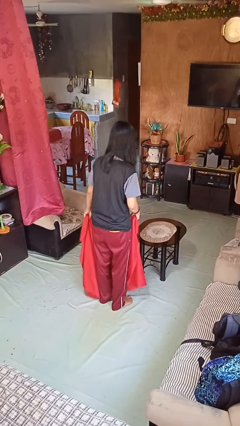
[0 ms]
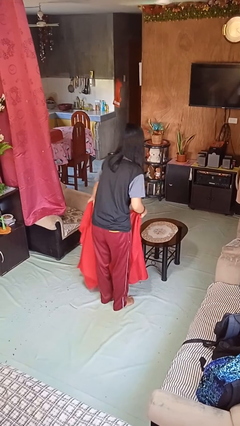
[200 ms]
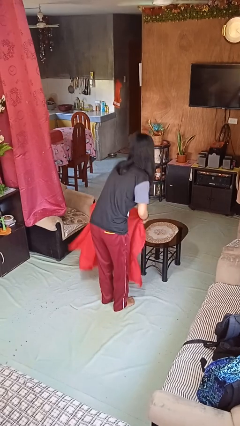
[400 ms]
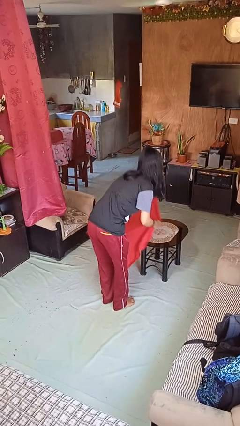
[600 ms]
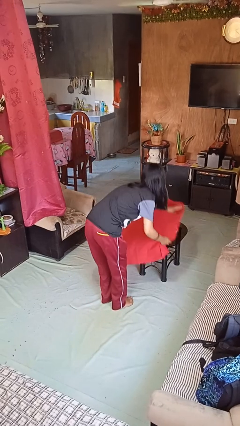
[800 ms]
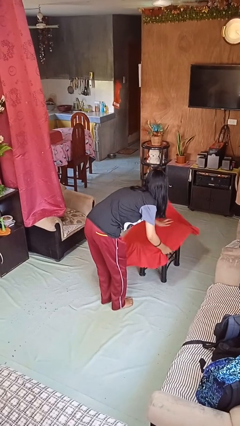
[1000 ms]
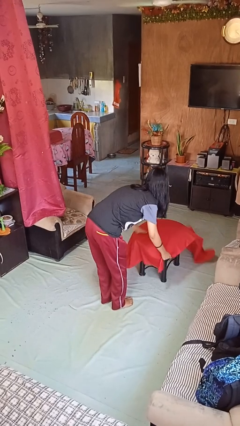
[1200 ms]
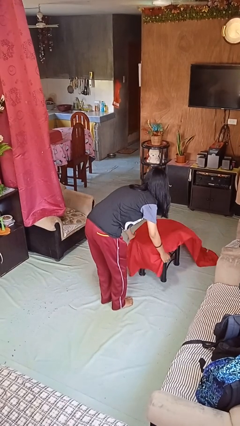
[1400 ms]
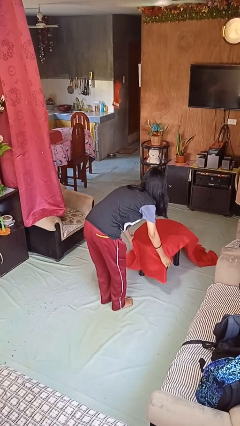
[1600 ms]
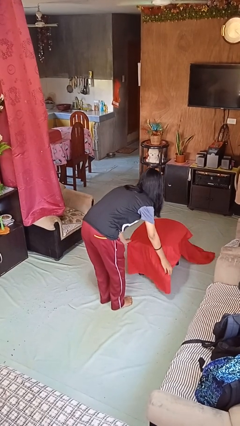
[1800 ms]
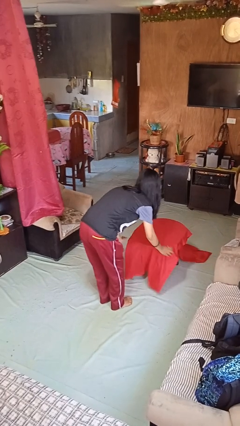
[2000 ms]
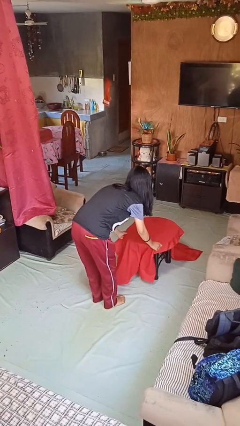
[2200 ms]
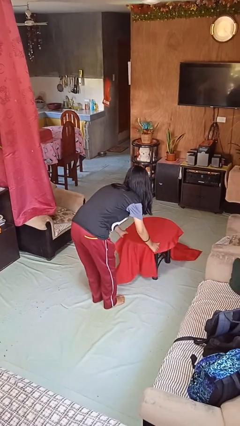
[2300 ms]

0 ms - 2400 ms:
person spreads tablecloth

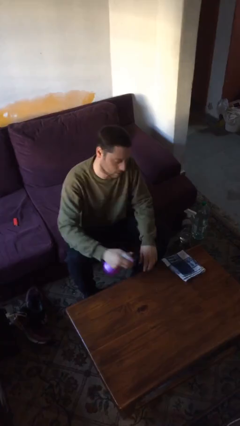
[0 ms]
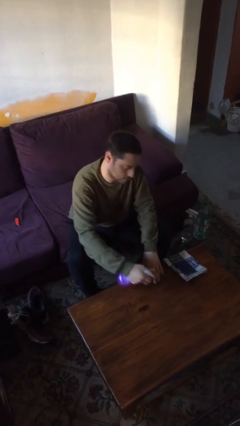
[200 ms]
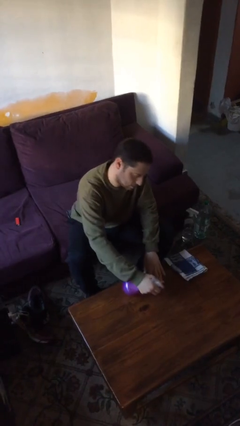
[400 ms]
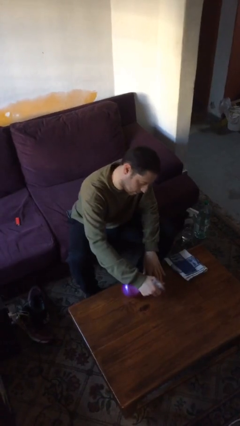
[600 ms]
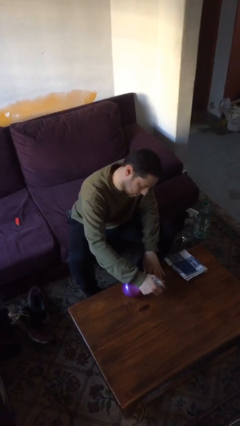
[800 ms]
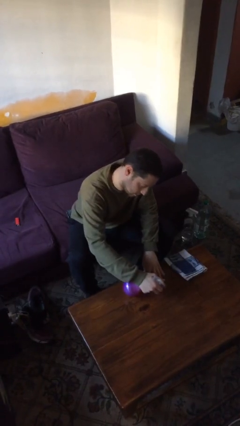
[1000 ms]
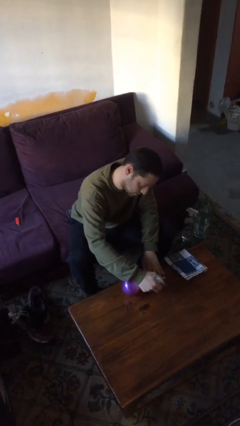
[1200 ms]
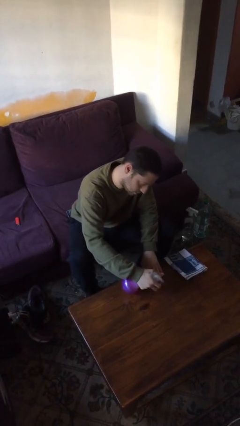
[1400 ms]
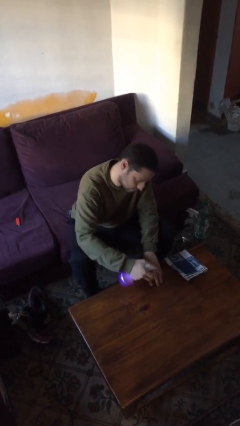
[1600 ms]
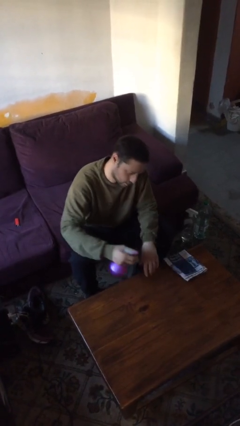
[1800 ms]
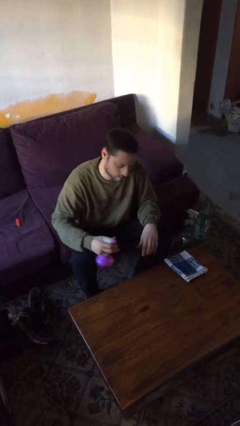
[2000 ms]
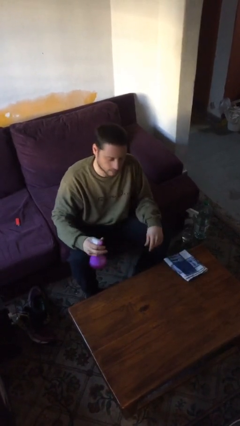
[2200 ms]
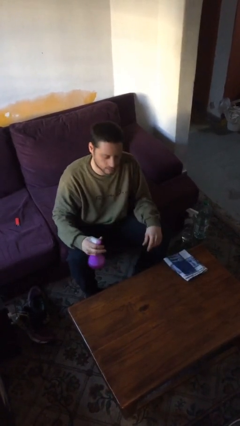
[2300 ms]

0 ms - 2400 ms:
person sprays from bottle

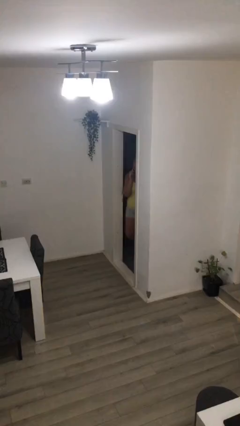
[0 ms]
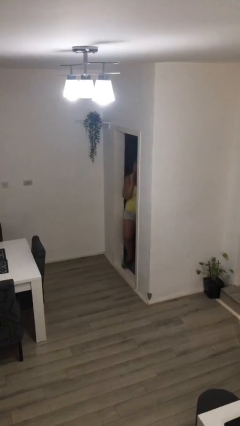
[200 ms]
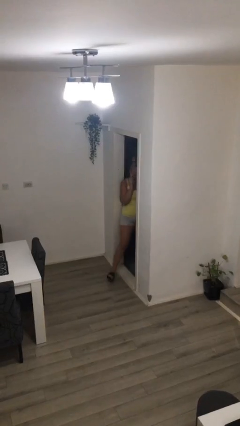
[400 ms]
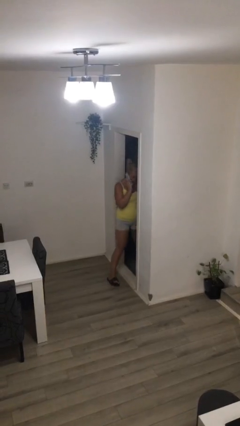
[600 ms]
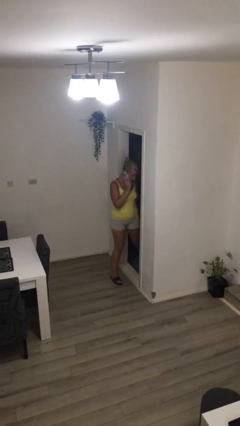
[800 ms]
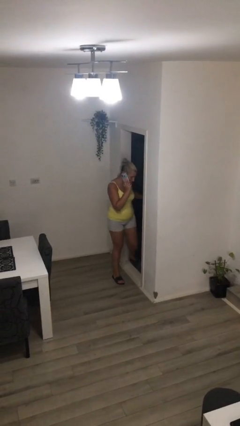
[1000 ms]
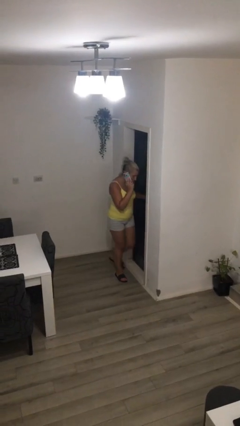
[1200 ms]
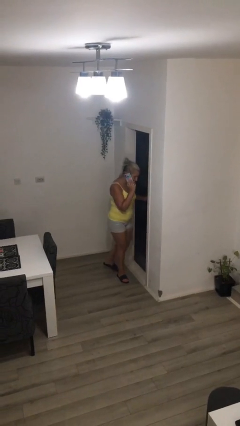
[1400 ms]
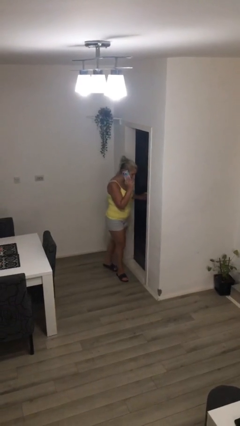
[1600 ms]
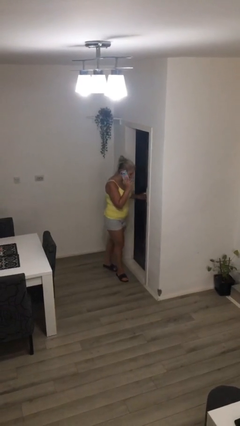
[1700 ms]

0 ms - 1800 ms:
person enters scene through structure

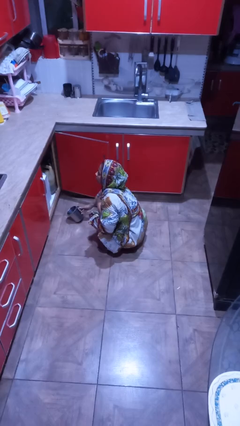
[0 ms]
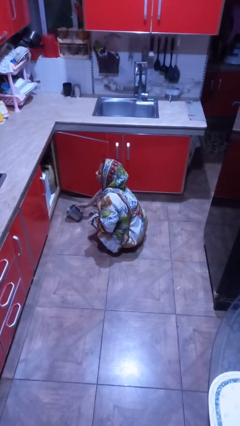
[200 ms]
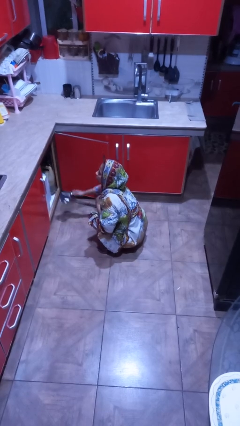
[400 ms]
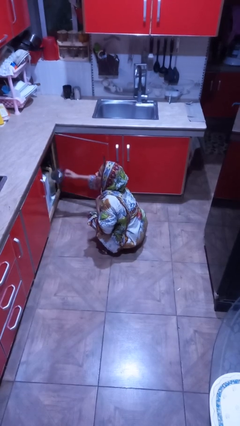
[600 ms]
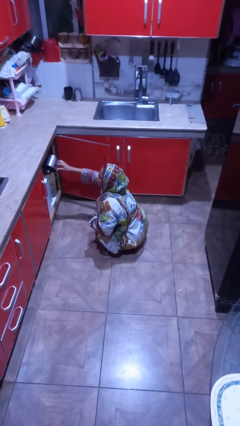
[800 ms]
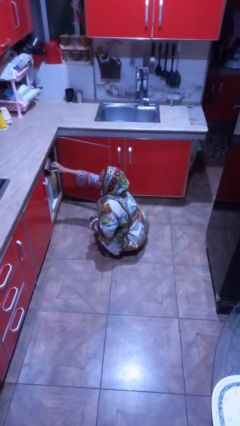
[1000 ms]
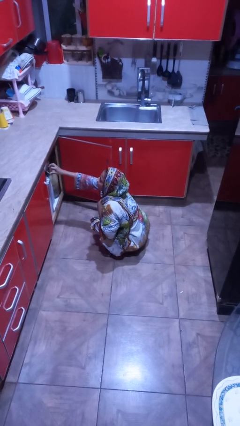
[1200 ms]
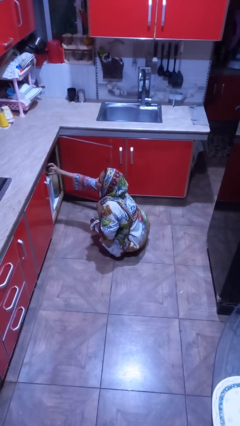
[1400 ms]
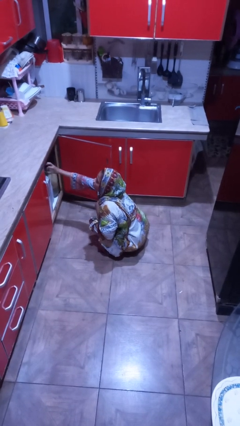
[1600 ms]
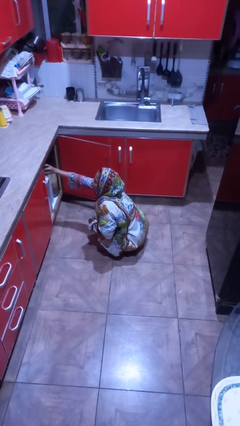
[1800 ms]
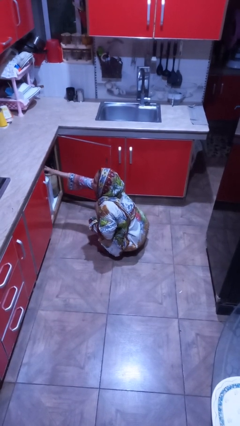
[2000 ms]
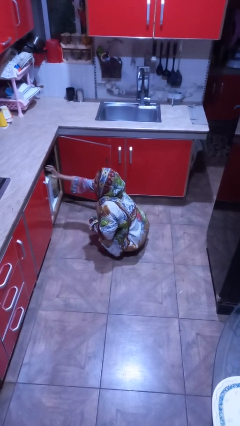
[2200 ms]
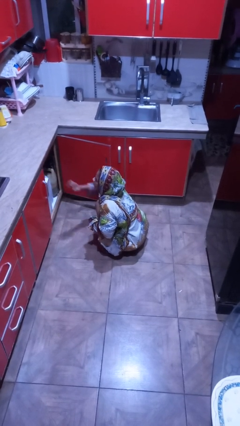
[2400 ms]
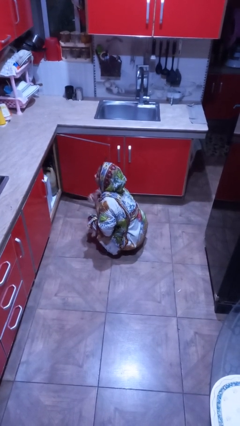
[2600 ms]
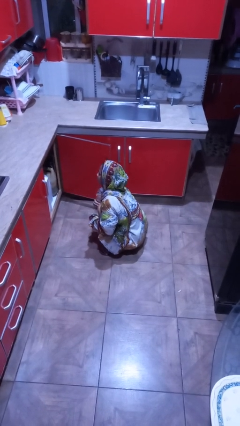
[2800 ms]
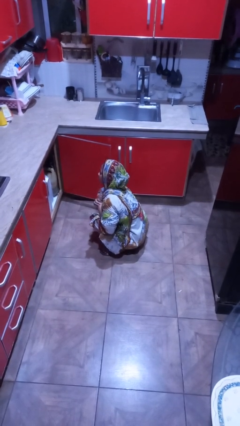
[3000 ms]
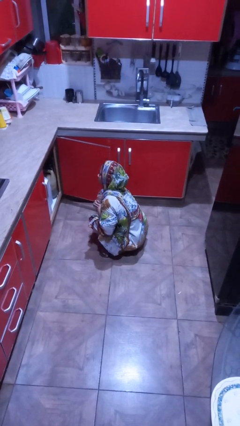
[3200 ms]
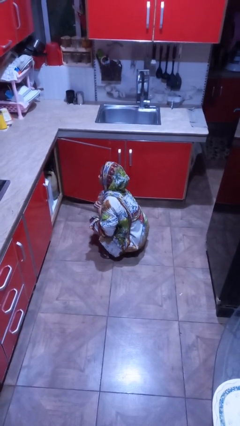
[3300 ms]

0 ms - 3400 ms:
person puts object in cabinet

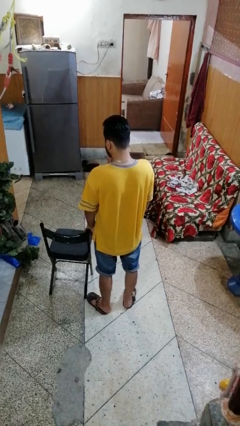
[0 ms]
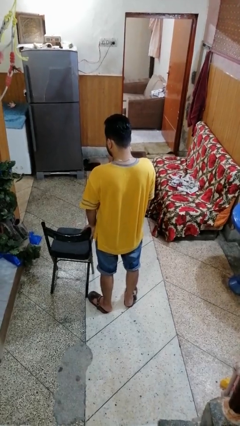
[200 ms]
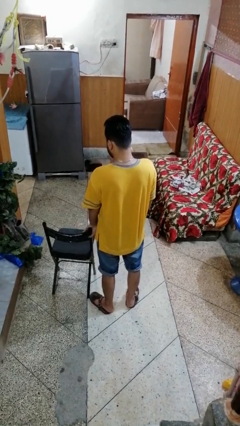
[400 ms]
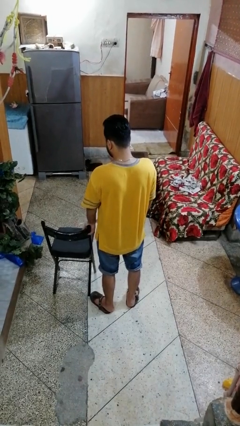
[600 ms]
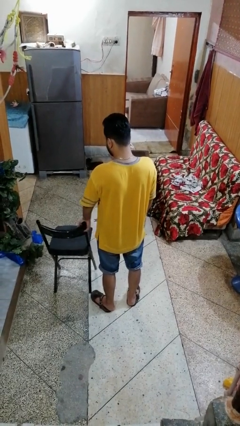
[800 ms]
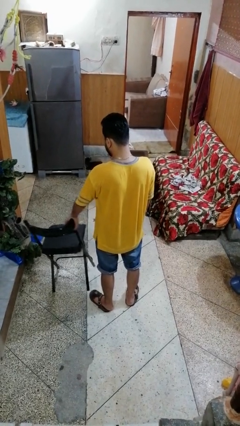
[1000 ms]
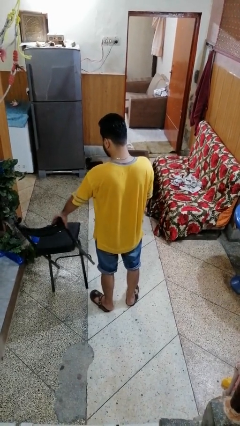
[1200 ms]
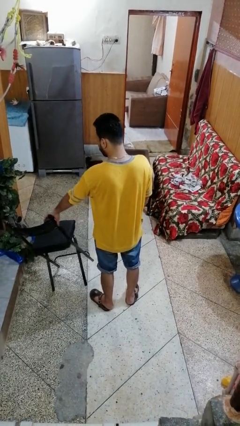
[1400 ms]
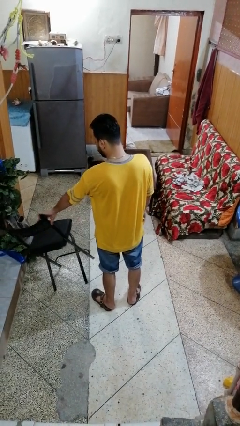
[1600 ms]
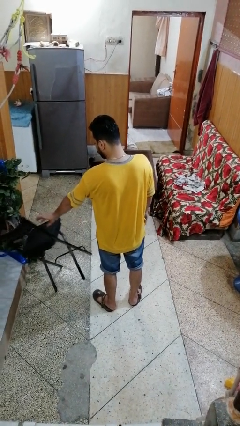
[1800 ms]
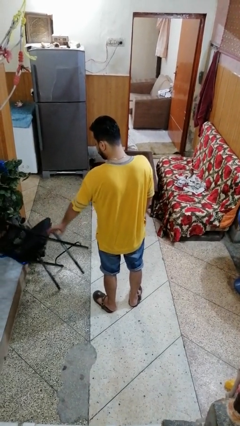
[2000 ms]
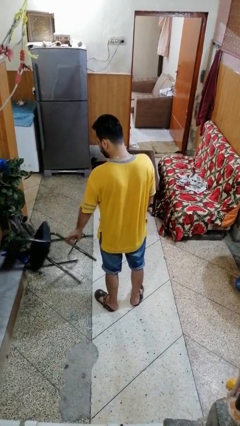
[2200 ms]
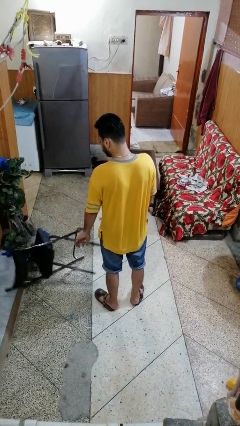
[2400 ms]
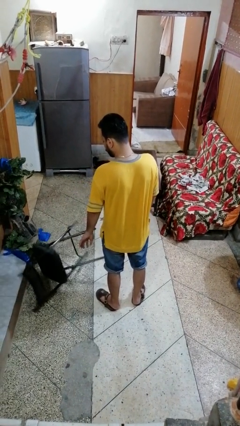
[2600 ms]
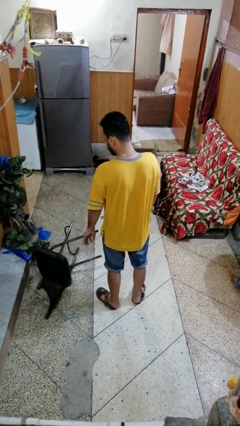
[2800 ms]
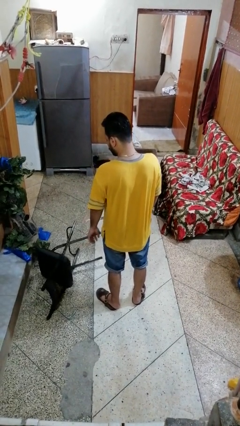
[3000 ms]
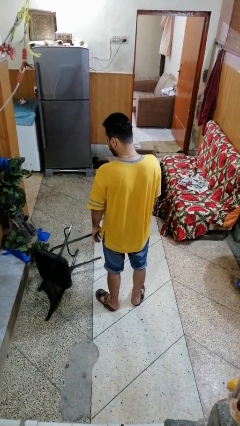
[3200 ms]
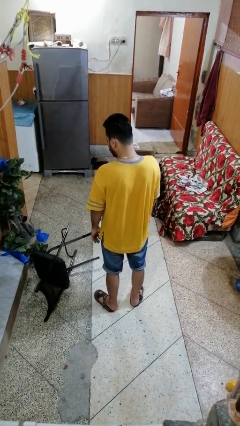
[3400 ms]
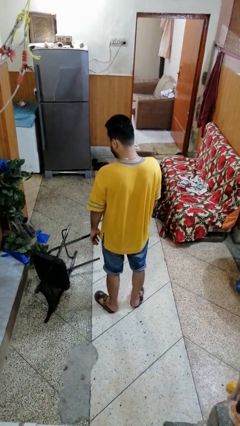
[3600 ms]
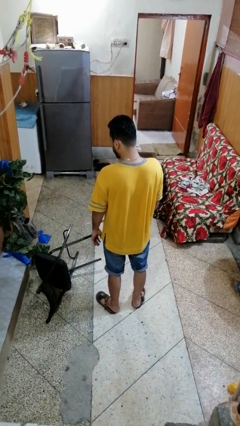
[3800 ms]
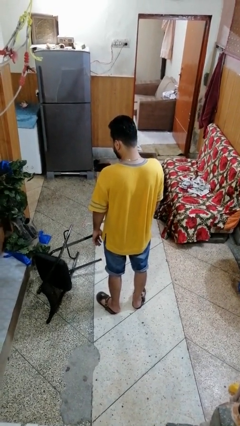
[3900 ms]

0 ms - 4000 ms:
person knocks over furniture

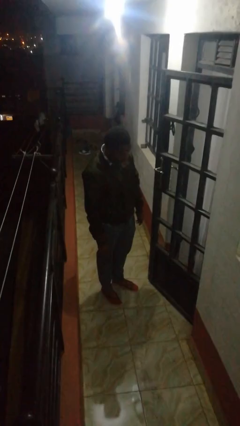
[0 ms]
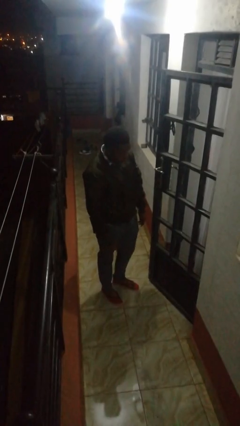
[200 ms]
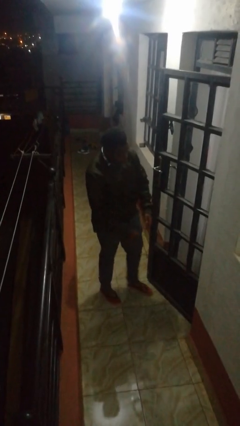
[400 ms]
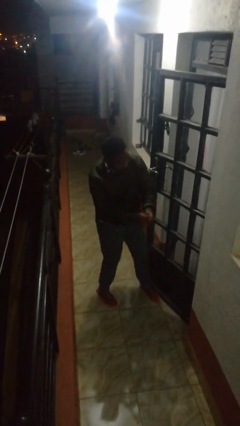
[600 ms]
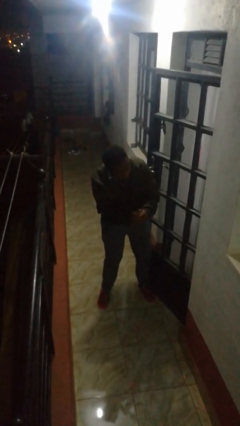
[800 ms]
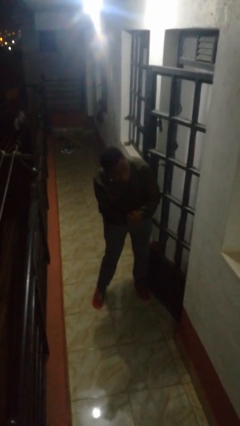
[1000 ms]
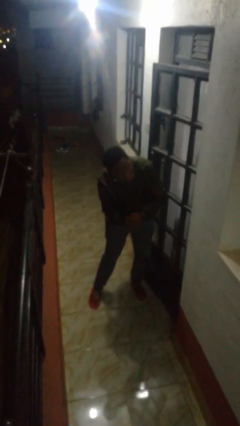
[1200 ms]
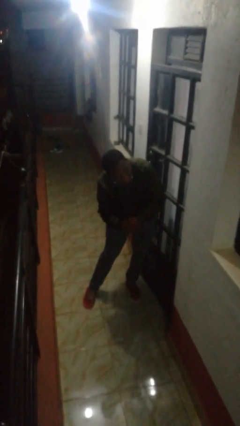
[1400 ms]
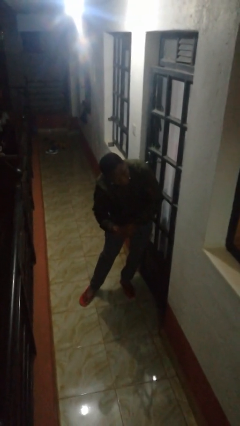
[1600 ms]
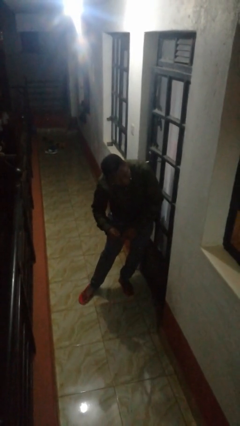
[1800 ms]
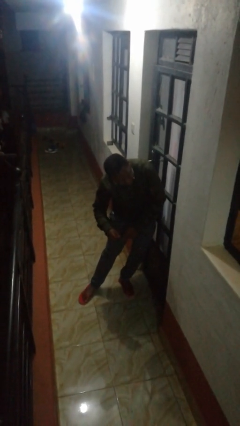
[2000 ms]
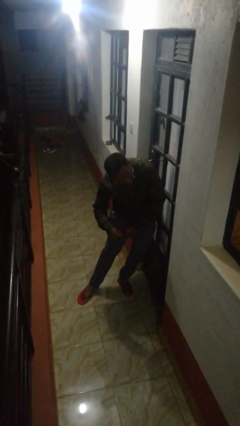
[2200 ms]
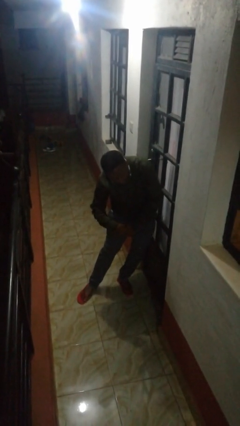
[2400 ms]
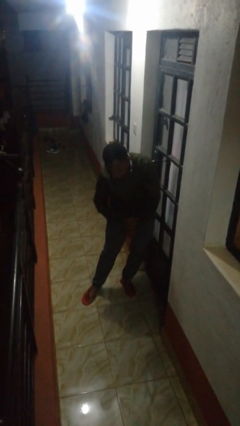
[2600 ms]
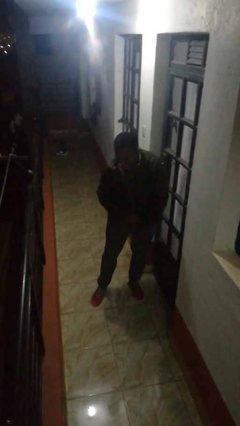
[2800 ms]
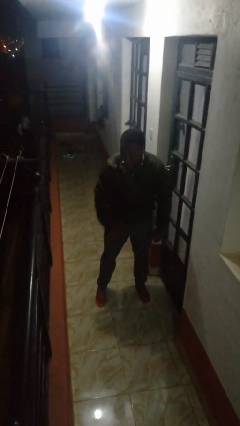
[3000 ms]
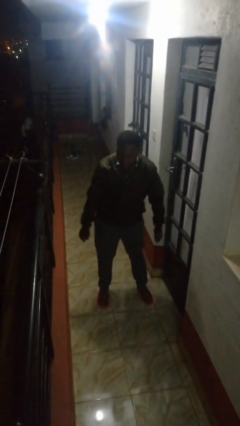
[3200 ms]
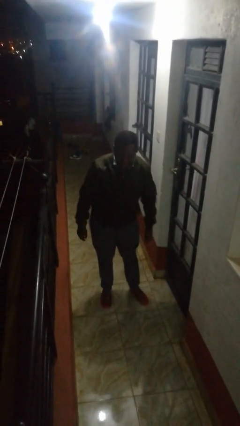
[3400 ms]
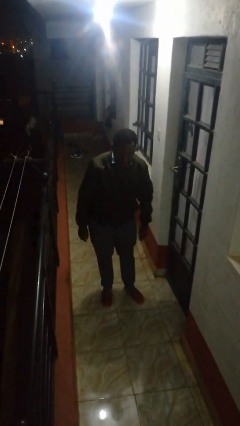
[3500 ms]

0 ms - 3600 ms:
person closes door with hip
